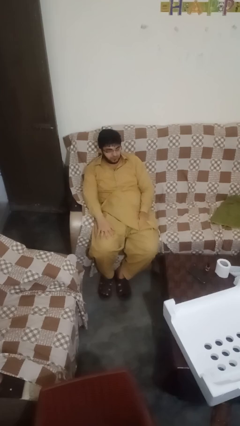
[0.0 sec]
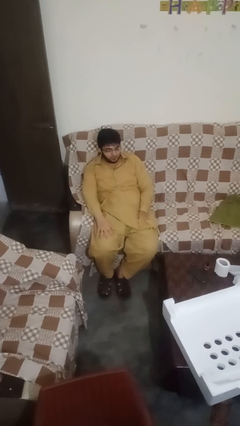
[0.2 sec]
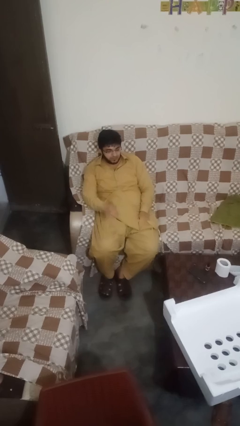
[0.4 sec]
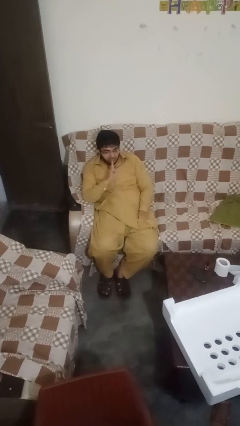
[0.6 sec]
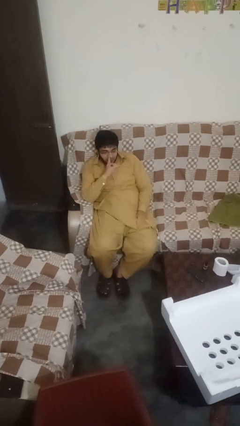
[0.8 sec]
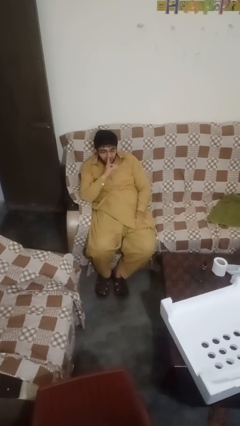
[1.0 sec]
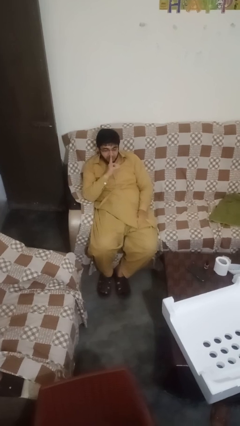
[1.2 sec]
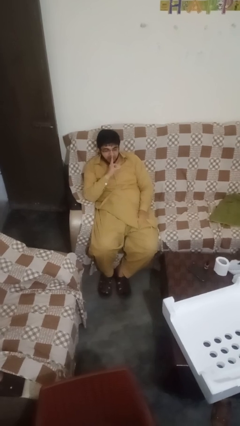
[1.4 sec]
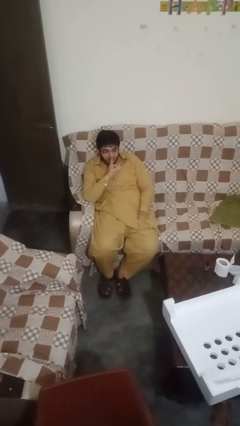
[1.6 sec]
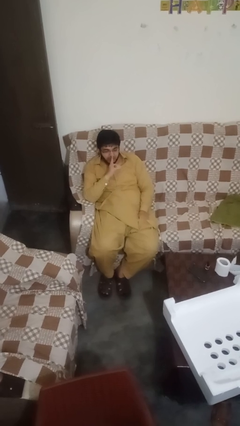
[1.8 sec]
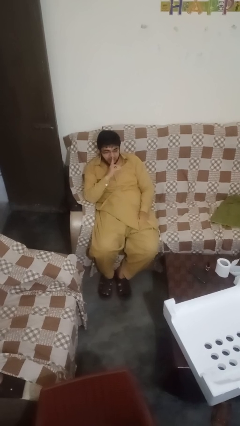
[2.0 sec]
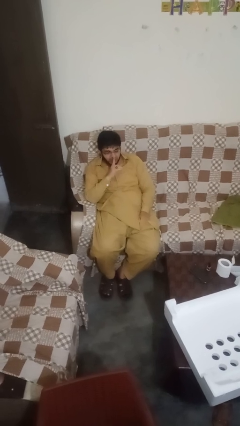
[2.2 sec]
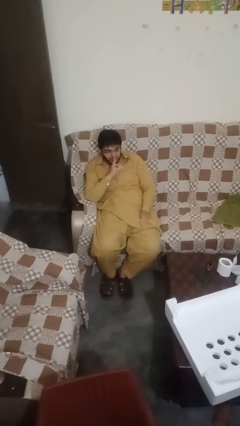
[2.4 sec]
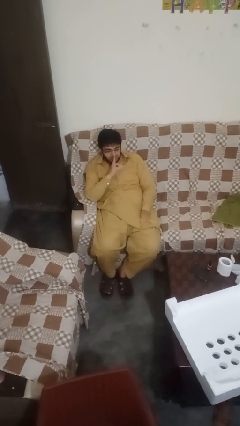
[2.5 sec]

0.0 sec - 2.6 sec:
person gestures be quiet

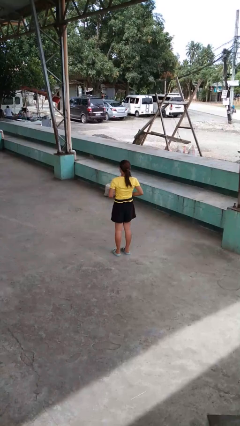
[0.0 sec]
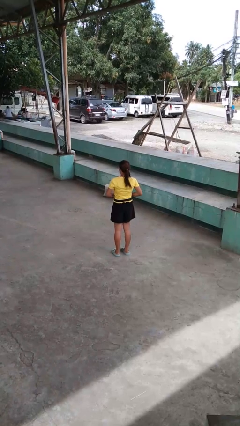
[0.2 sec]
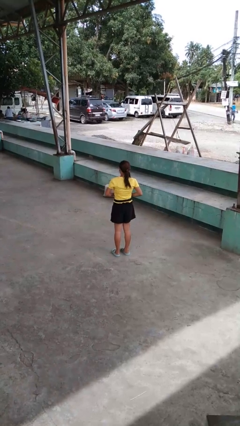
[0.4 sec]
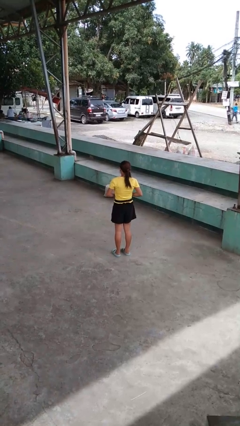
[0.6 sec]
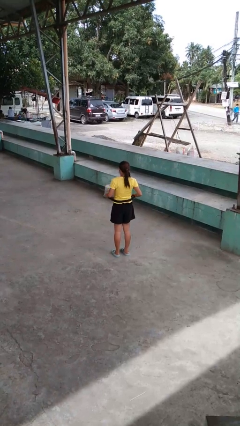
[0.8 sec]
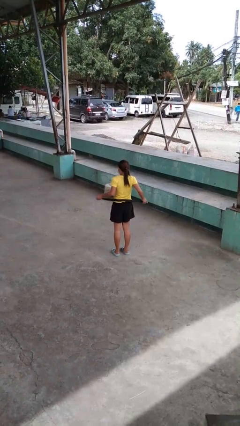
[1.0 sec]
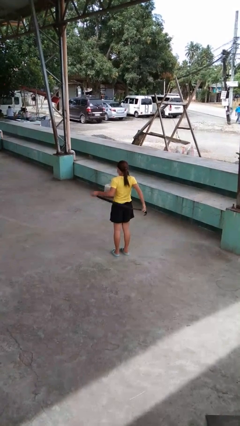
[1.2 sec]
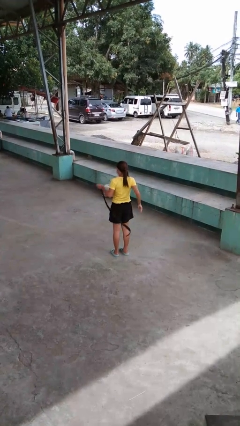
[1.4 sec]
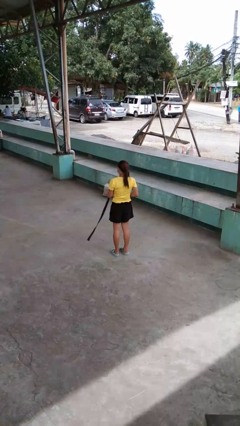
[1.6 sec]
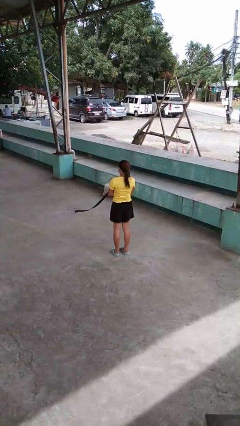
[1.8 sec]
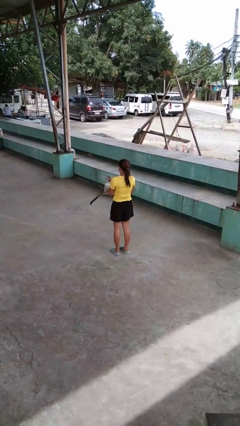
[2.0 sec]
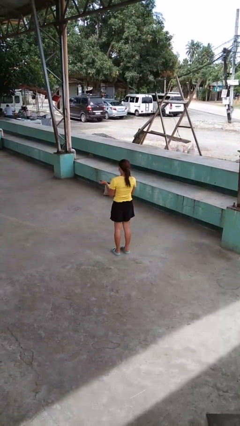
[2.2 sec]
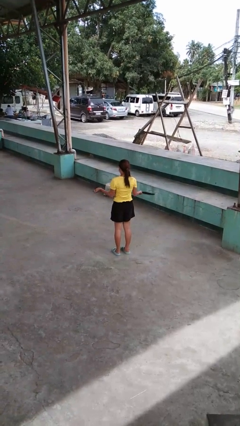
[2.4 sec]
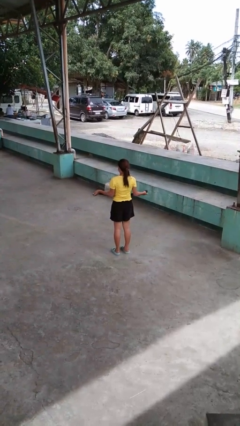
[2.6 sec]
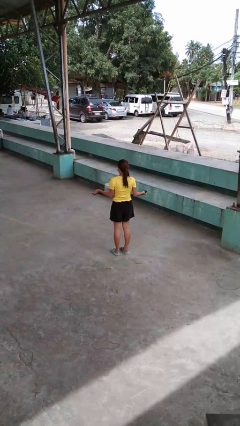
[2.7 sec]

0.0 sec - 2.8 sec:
person takes off belt

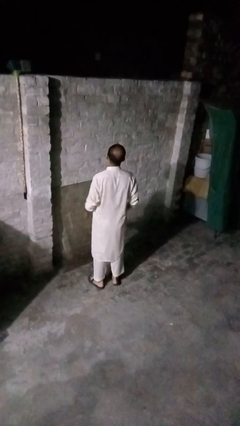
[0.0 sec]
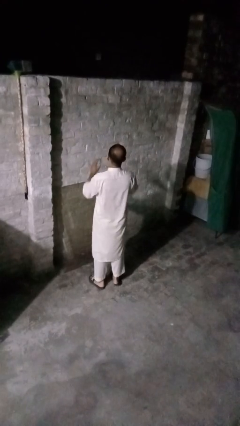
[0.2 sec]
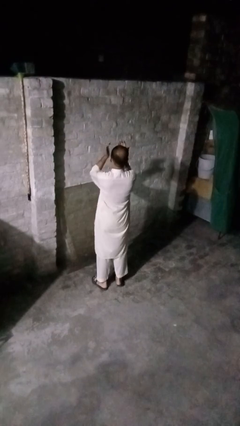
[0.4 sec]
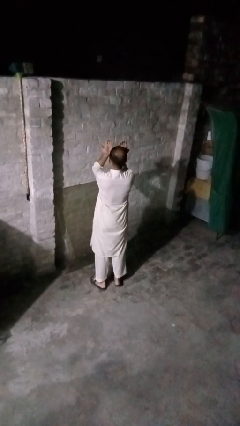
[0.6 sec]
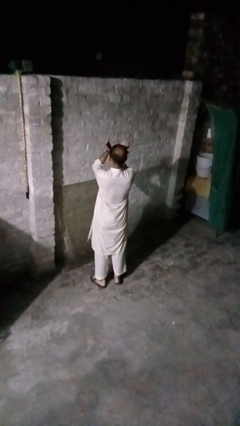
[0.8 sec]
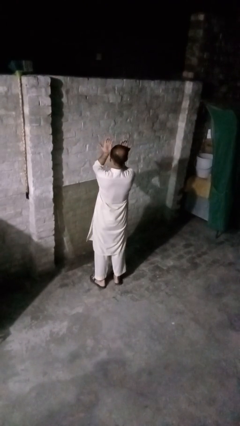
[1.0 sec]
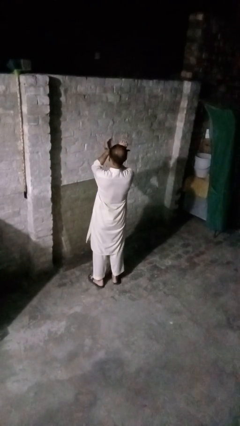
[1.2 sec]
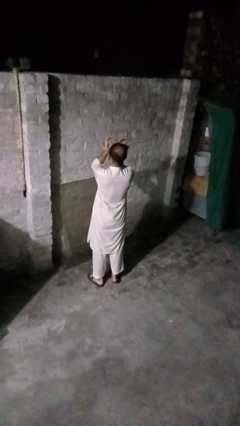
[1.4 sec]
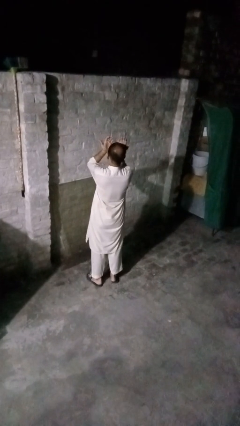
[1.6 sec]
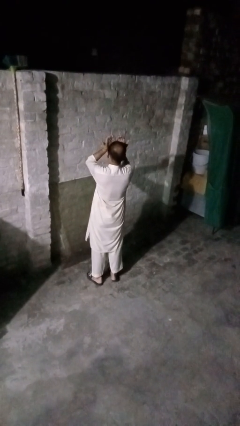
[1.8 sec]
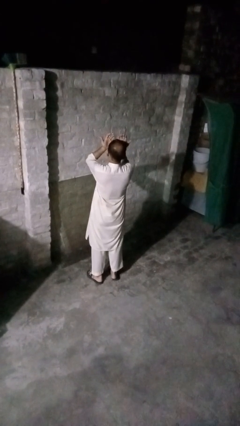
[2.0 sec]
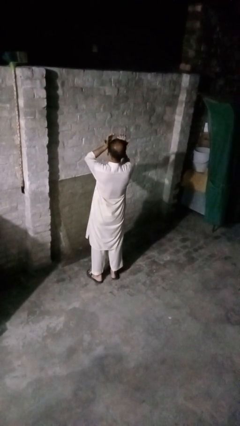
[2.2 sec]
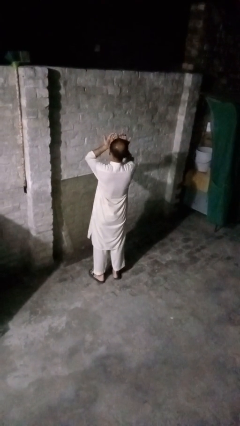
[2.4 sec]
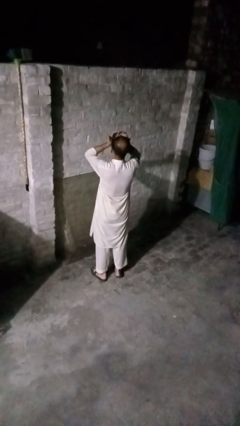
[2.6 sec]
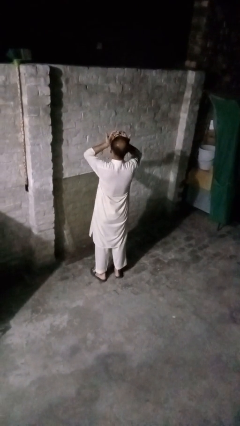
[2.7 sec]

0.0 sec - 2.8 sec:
person rubs eyes

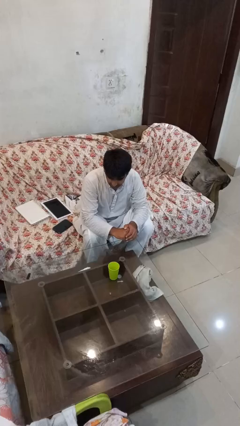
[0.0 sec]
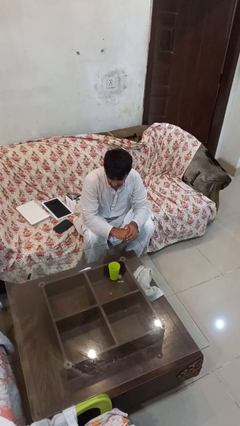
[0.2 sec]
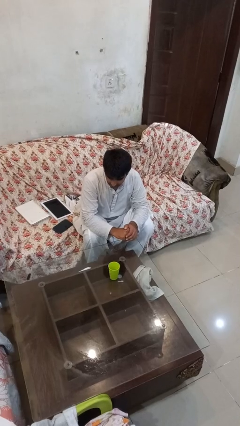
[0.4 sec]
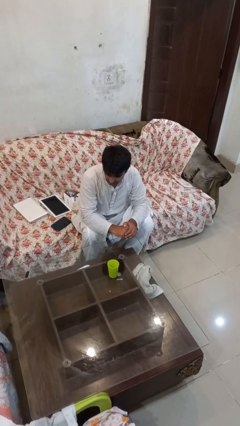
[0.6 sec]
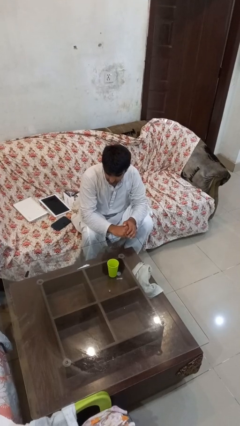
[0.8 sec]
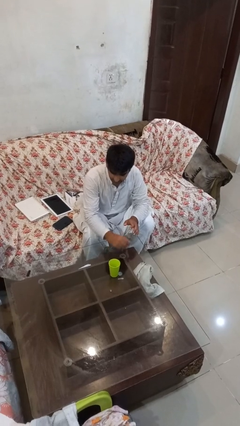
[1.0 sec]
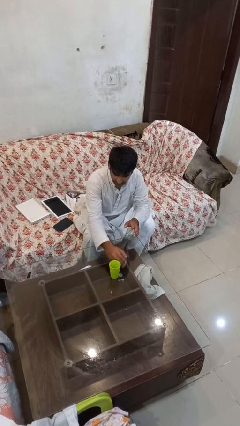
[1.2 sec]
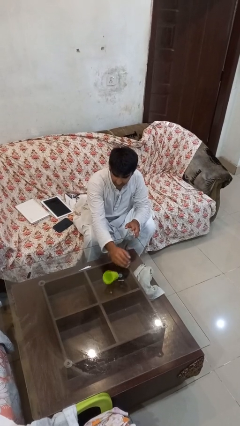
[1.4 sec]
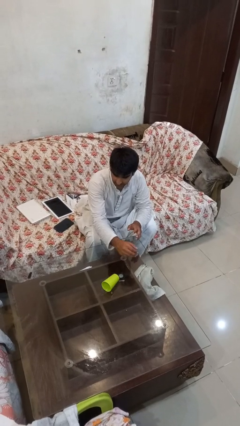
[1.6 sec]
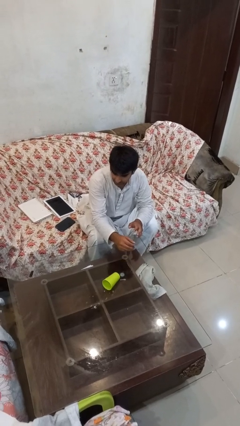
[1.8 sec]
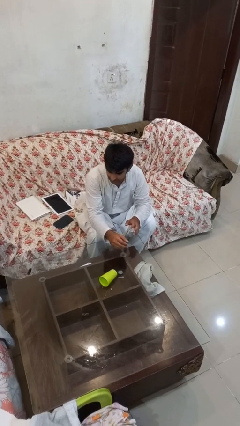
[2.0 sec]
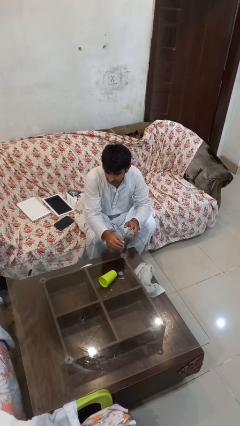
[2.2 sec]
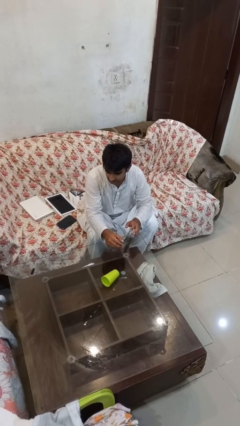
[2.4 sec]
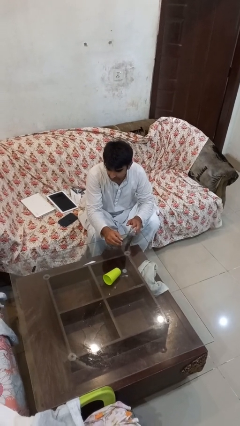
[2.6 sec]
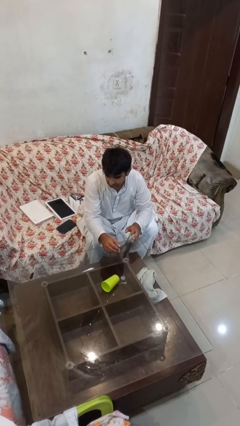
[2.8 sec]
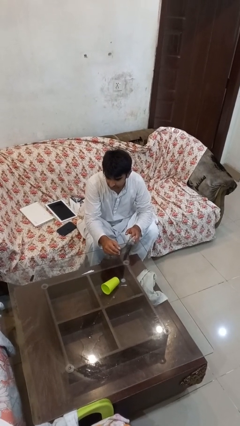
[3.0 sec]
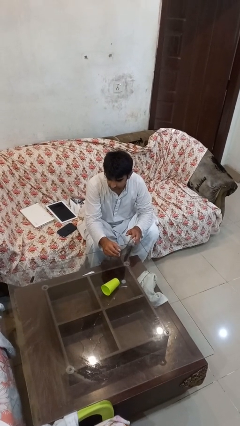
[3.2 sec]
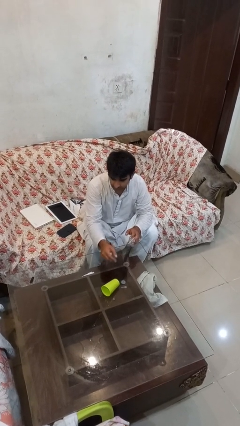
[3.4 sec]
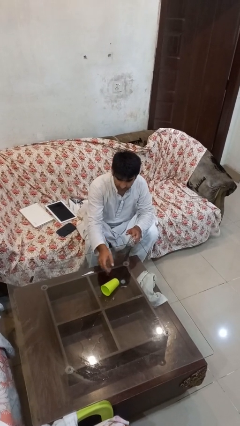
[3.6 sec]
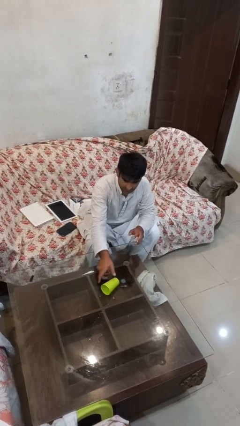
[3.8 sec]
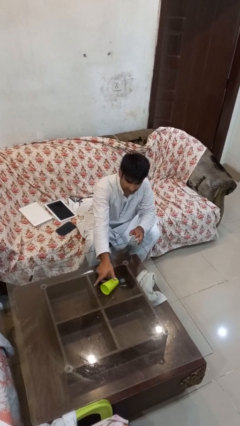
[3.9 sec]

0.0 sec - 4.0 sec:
person spills on table

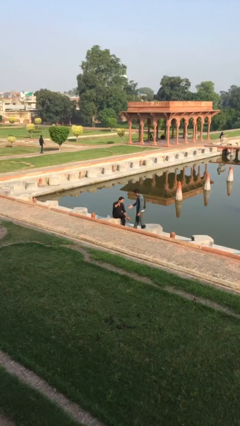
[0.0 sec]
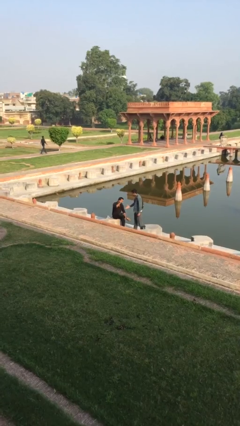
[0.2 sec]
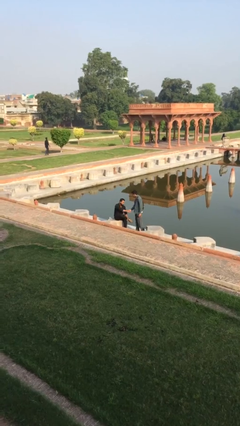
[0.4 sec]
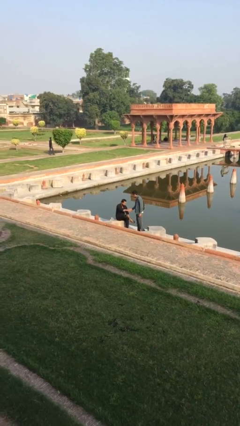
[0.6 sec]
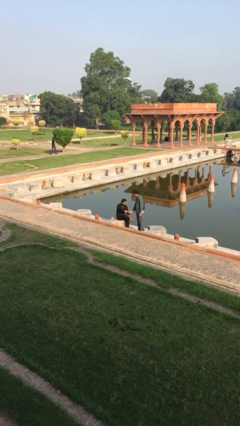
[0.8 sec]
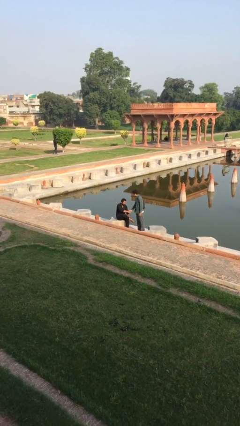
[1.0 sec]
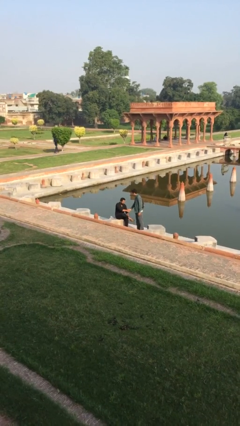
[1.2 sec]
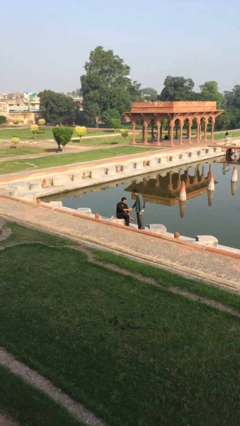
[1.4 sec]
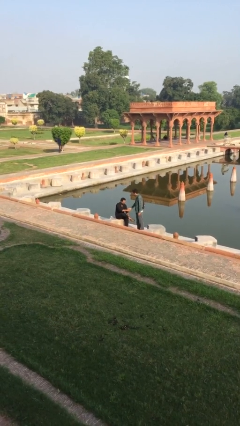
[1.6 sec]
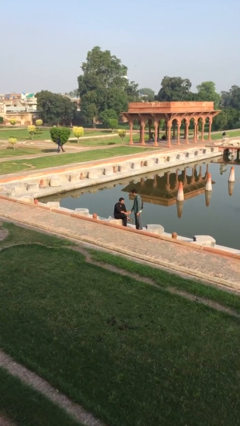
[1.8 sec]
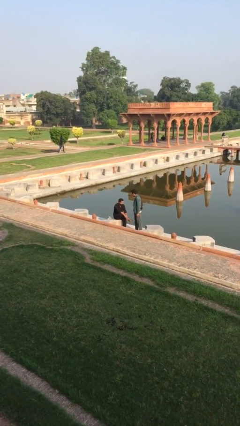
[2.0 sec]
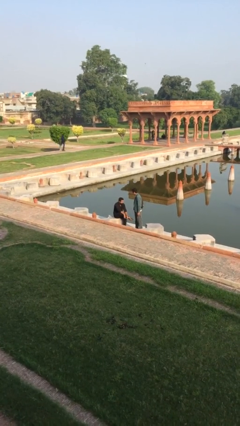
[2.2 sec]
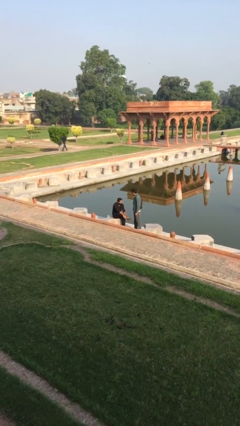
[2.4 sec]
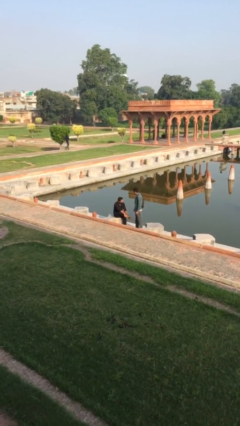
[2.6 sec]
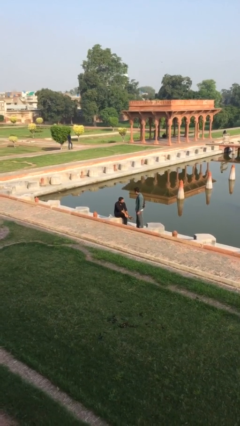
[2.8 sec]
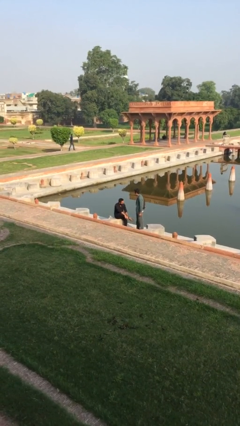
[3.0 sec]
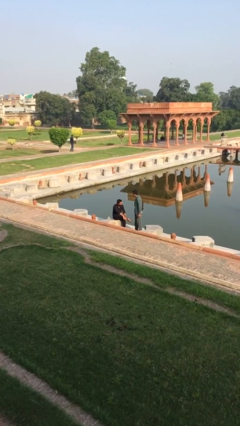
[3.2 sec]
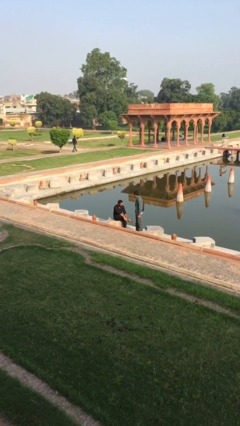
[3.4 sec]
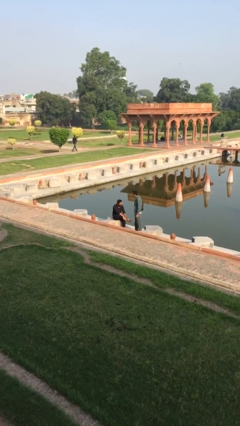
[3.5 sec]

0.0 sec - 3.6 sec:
person shakes hand

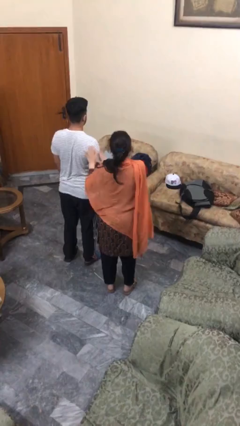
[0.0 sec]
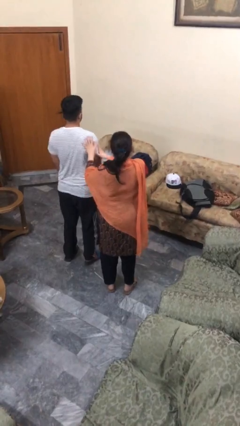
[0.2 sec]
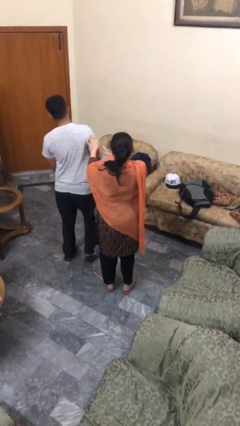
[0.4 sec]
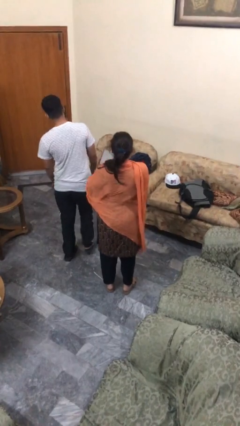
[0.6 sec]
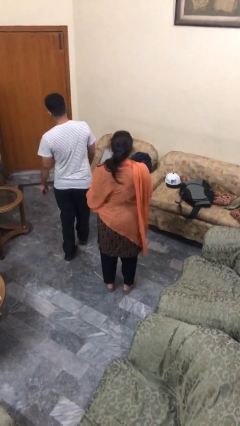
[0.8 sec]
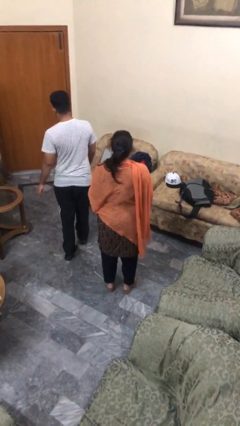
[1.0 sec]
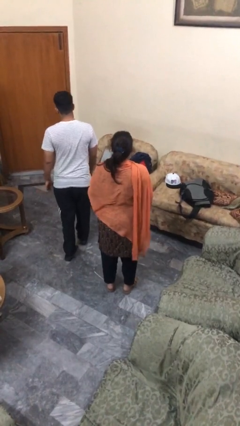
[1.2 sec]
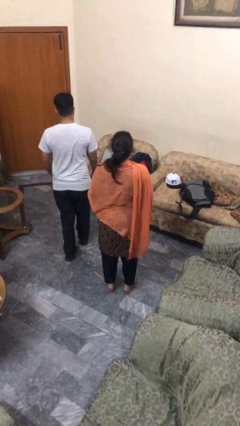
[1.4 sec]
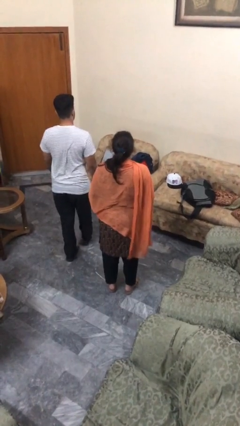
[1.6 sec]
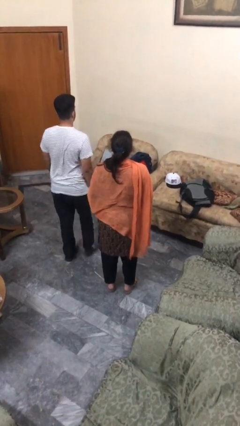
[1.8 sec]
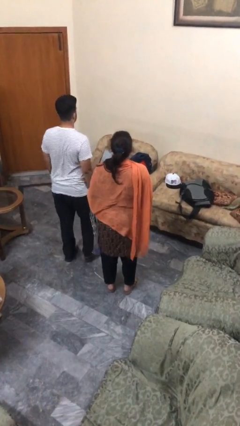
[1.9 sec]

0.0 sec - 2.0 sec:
person shoves person
